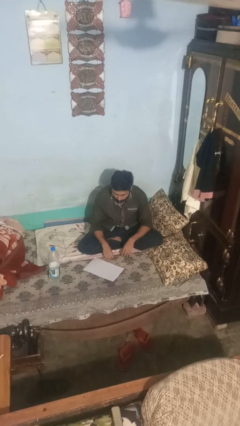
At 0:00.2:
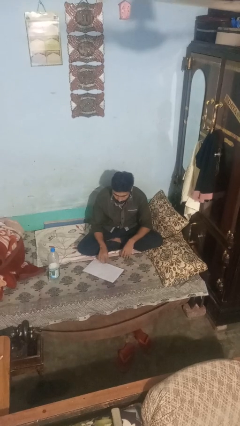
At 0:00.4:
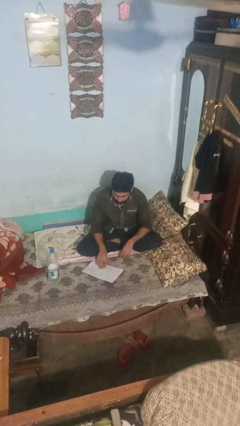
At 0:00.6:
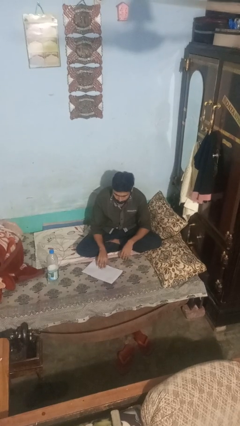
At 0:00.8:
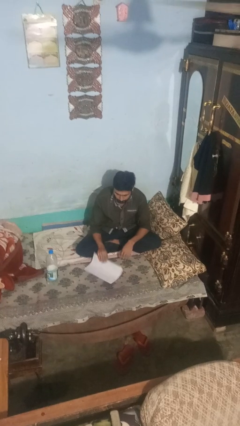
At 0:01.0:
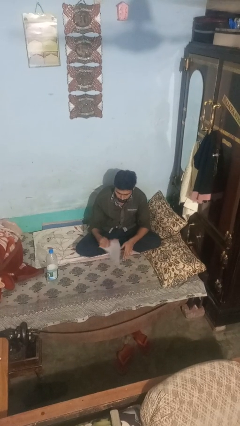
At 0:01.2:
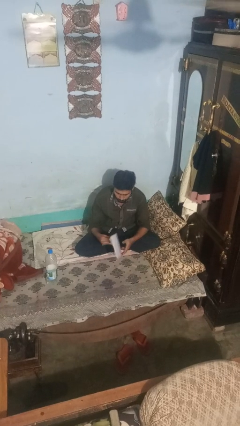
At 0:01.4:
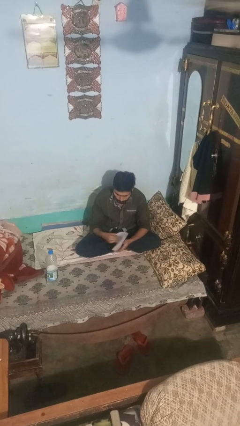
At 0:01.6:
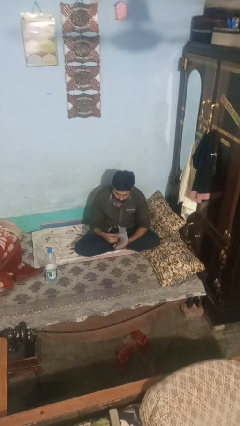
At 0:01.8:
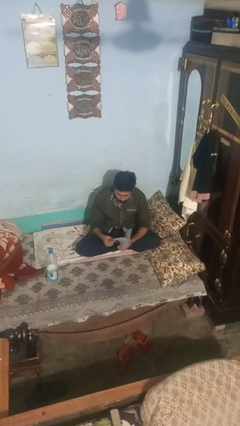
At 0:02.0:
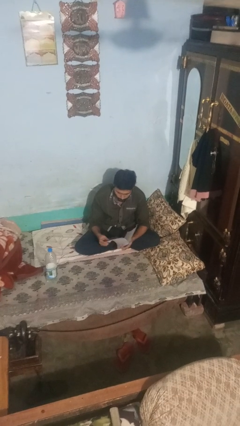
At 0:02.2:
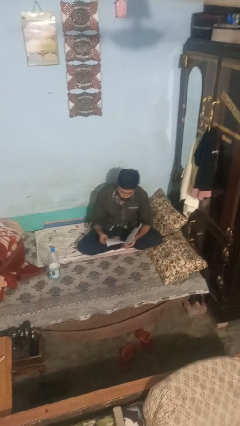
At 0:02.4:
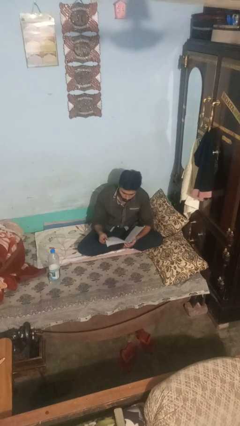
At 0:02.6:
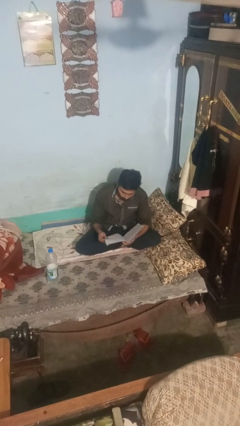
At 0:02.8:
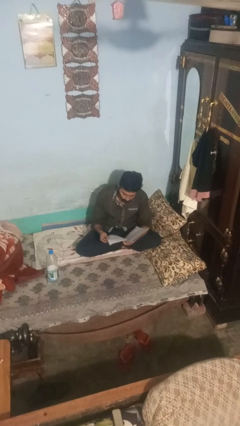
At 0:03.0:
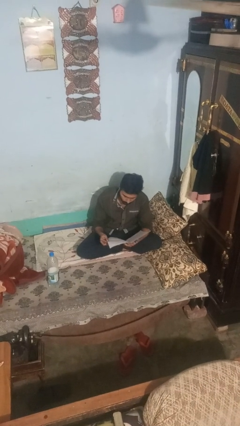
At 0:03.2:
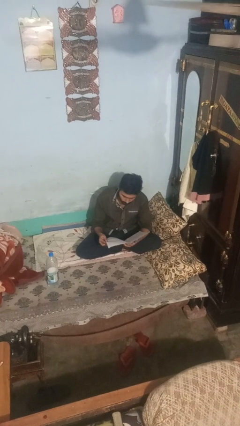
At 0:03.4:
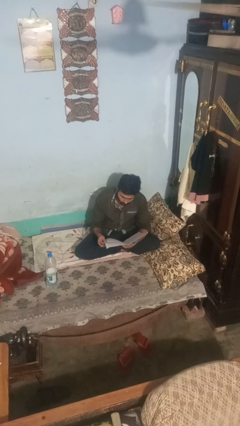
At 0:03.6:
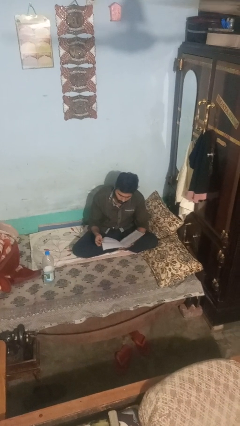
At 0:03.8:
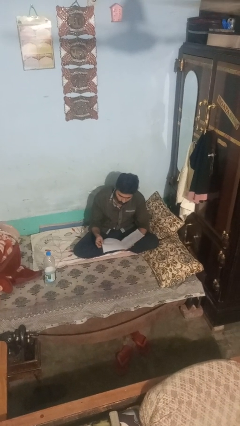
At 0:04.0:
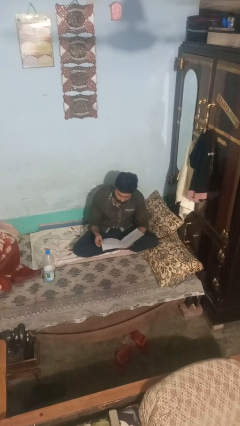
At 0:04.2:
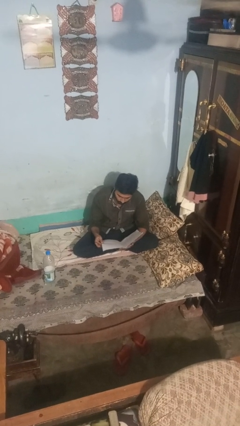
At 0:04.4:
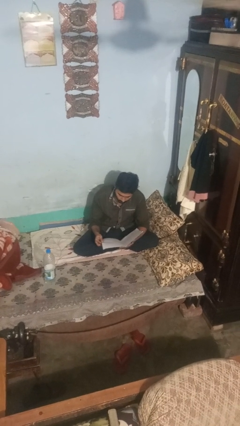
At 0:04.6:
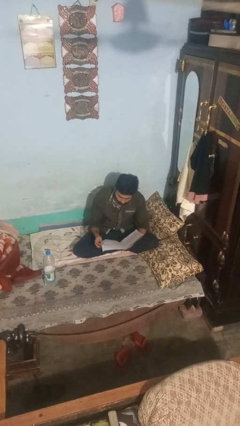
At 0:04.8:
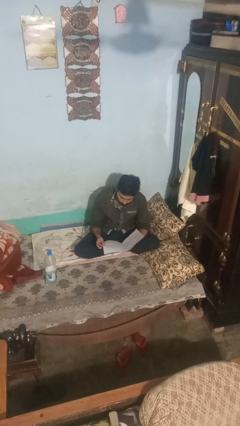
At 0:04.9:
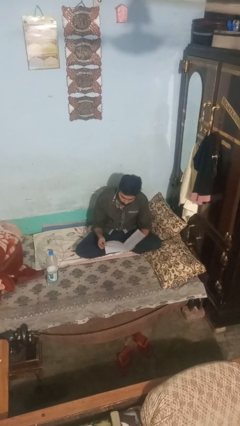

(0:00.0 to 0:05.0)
person reads newspaper

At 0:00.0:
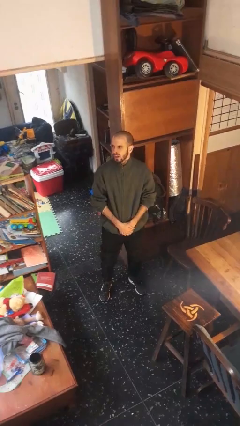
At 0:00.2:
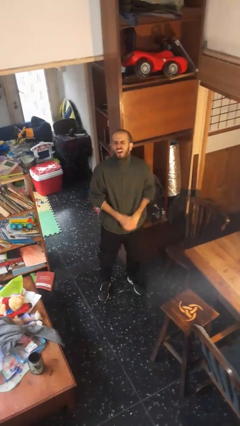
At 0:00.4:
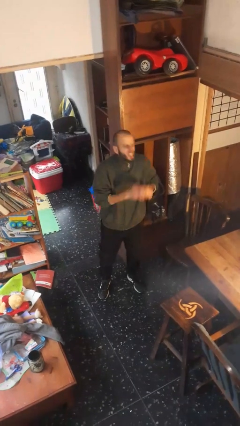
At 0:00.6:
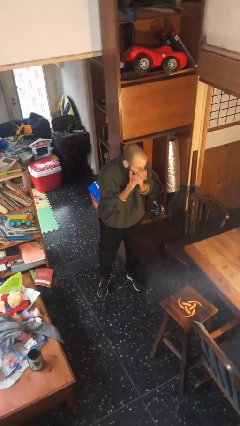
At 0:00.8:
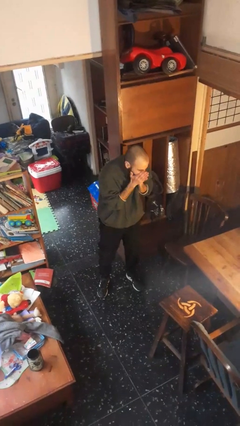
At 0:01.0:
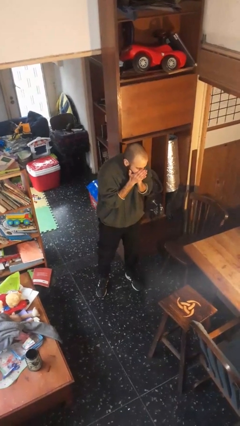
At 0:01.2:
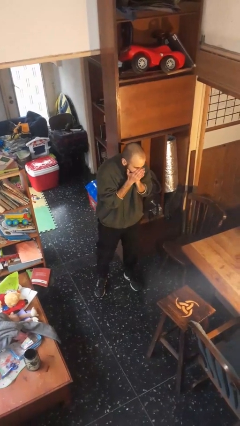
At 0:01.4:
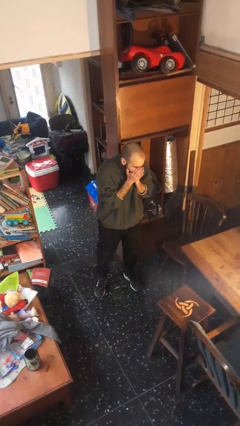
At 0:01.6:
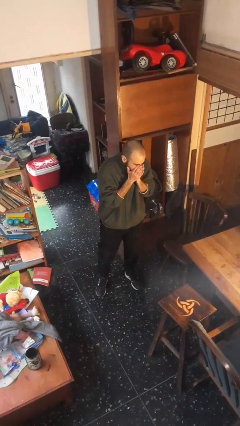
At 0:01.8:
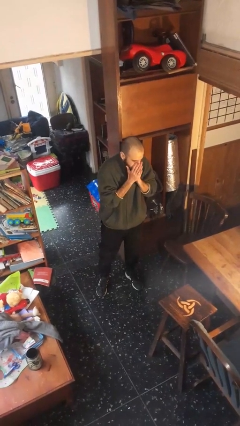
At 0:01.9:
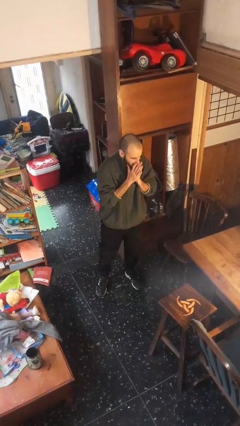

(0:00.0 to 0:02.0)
person sneezes into hand

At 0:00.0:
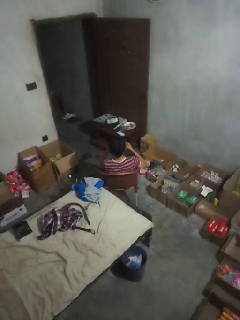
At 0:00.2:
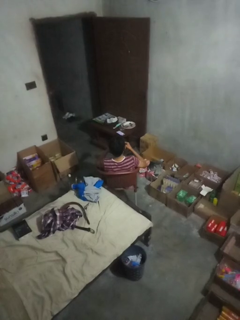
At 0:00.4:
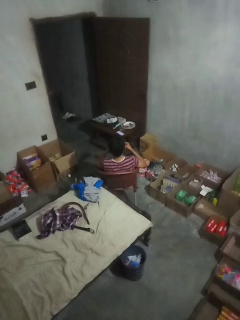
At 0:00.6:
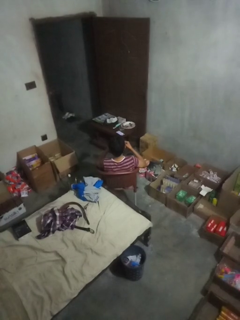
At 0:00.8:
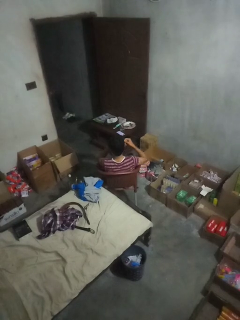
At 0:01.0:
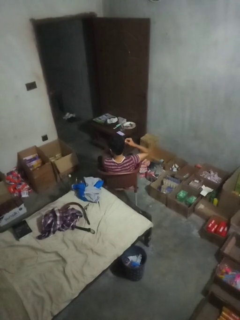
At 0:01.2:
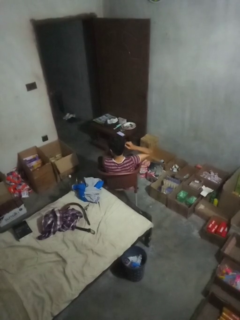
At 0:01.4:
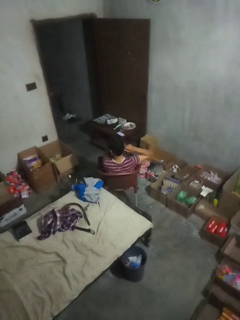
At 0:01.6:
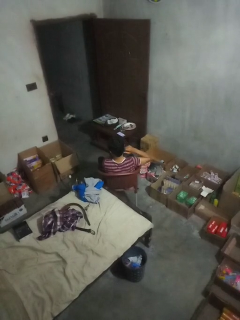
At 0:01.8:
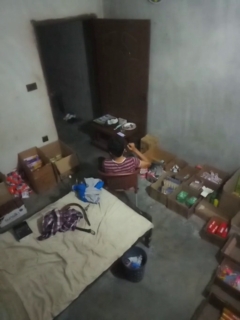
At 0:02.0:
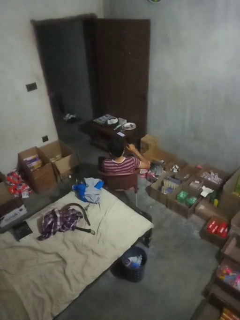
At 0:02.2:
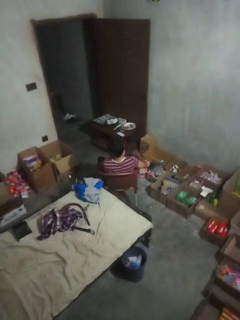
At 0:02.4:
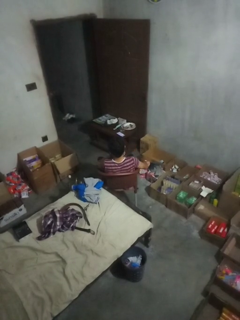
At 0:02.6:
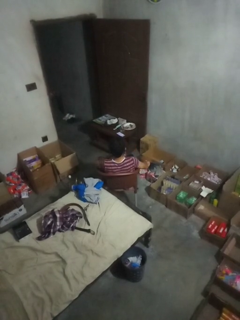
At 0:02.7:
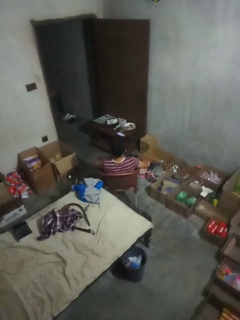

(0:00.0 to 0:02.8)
person puts on earrings

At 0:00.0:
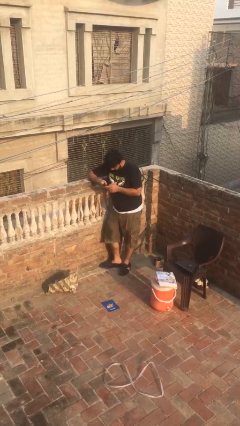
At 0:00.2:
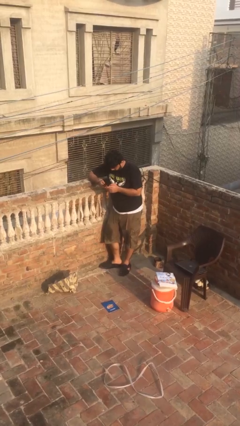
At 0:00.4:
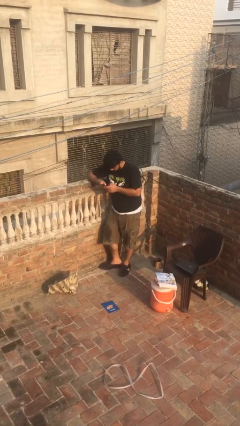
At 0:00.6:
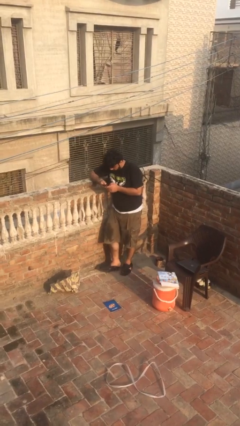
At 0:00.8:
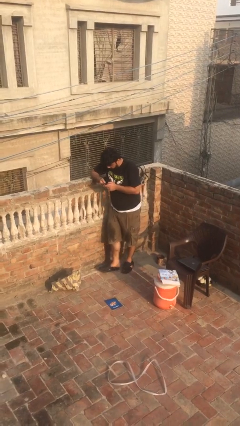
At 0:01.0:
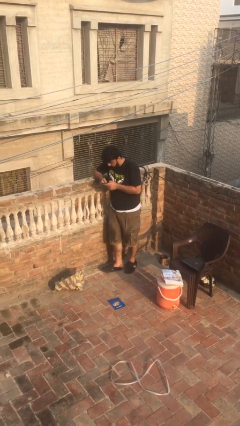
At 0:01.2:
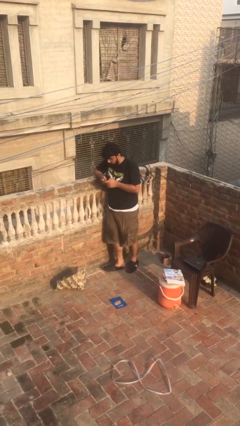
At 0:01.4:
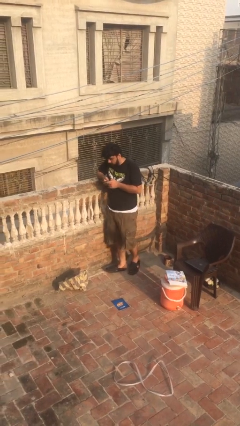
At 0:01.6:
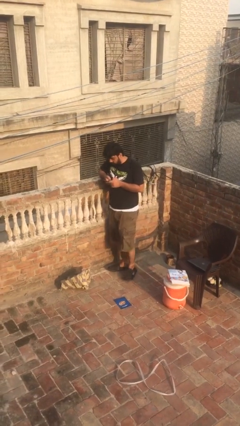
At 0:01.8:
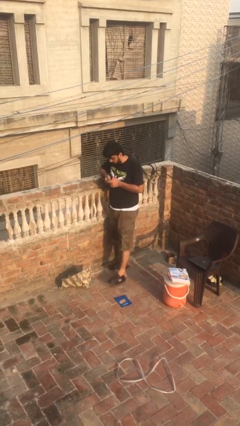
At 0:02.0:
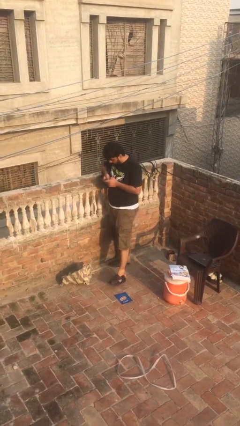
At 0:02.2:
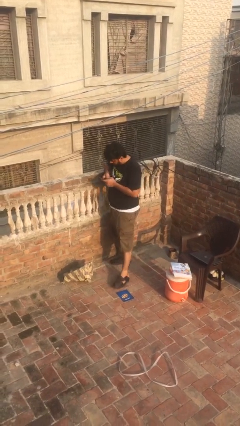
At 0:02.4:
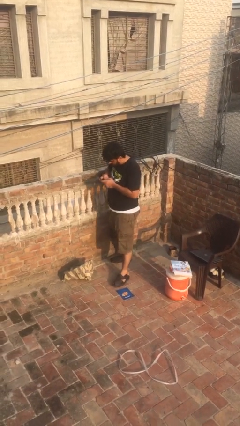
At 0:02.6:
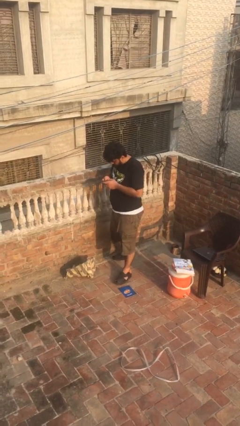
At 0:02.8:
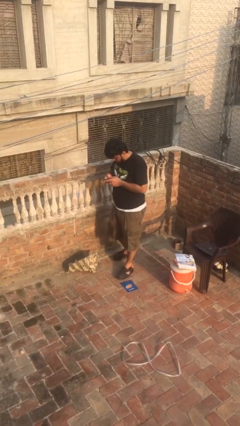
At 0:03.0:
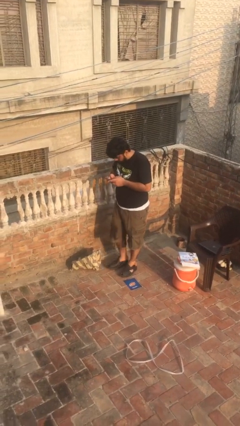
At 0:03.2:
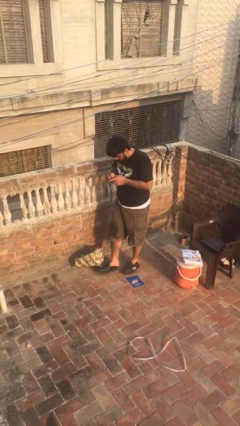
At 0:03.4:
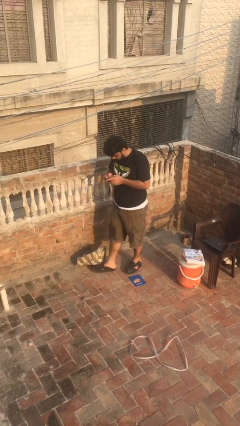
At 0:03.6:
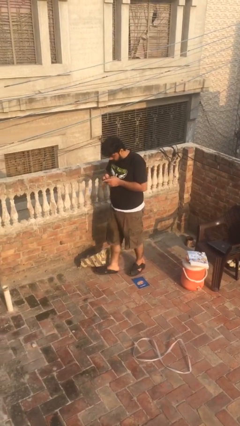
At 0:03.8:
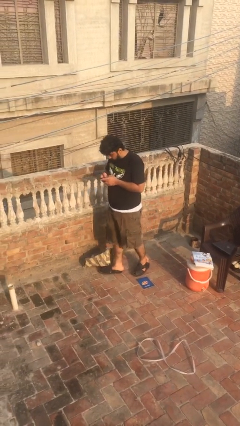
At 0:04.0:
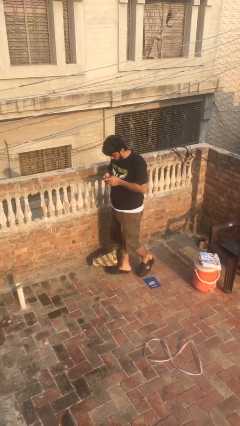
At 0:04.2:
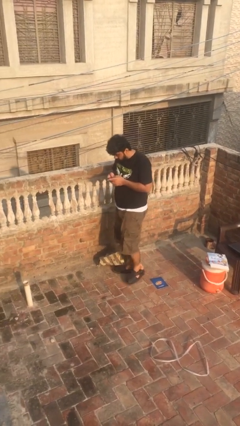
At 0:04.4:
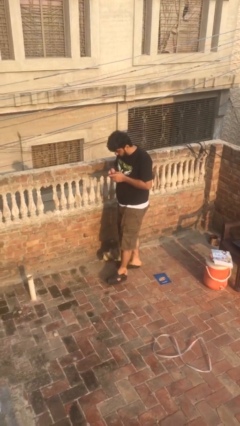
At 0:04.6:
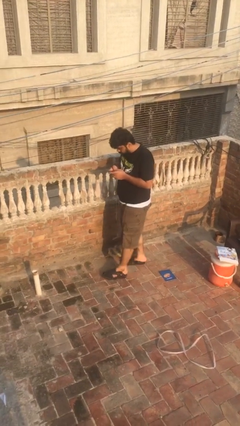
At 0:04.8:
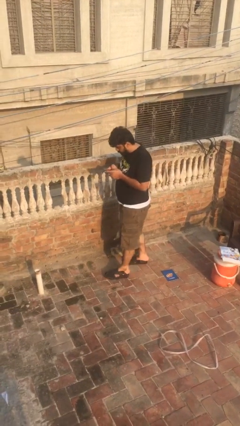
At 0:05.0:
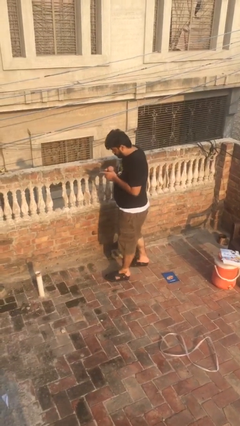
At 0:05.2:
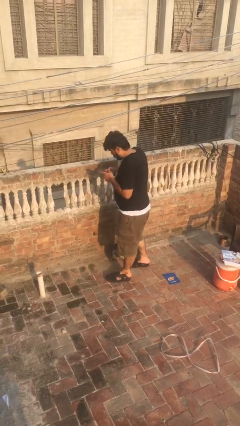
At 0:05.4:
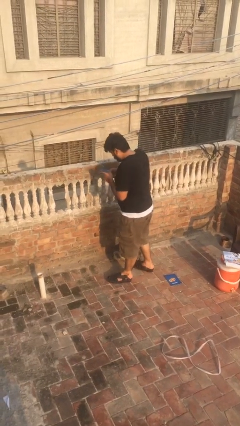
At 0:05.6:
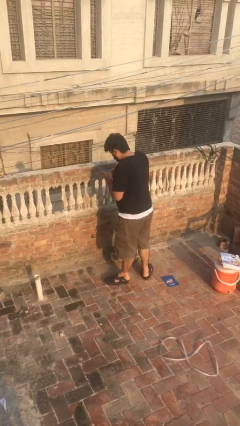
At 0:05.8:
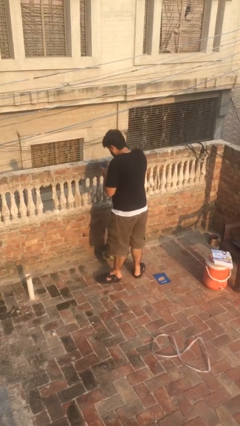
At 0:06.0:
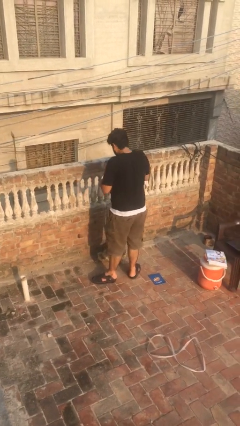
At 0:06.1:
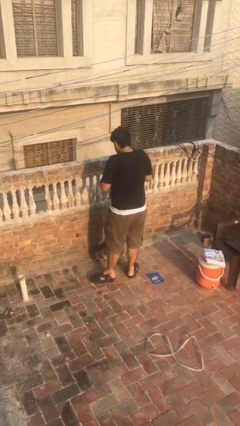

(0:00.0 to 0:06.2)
person texts on phone

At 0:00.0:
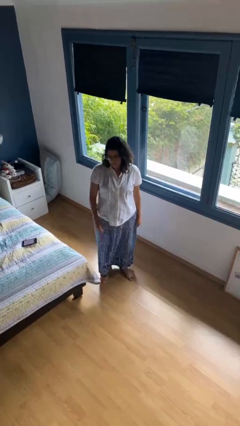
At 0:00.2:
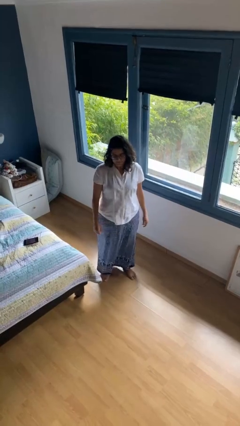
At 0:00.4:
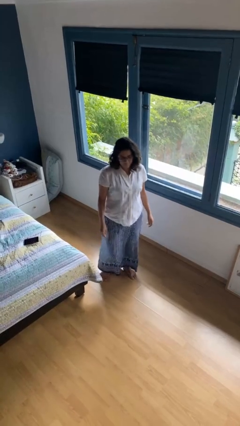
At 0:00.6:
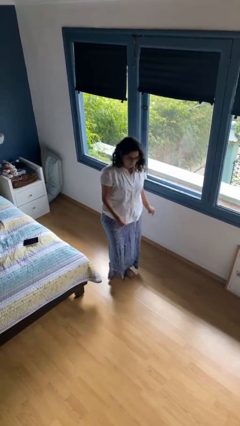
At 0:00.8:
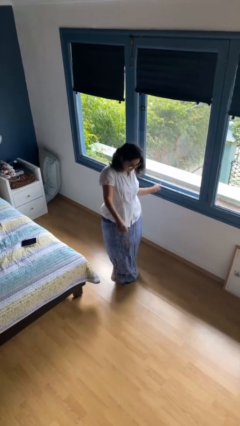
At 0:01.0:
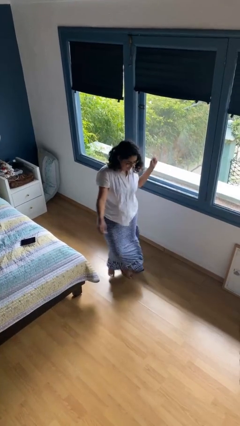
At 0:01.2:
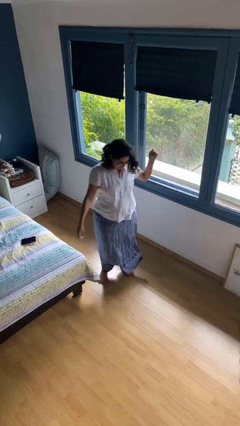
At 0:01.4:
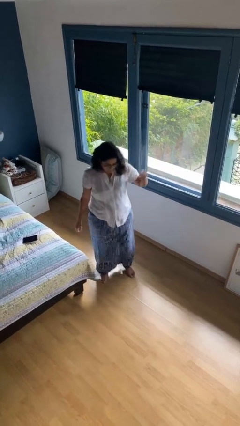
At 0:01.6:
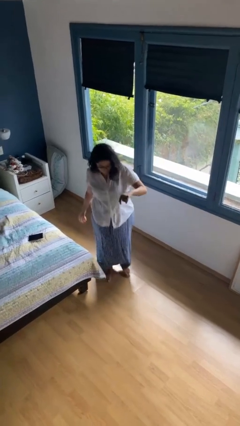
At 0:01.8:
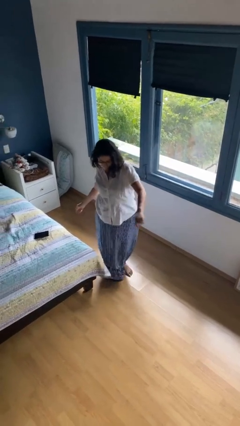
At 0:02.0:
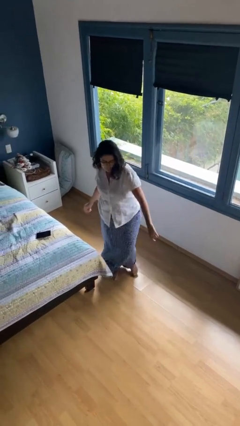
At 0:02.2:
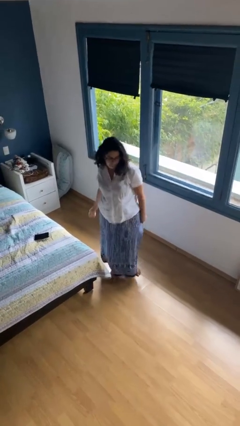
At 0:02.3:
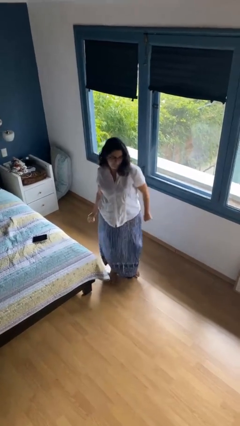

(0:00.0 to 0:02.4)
person dances in place
